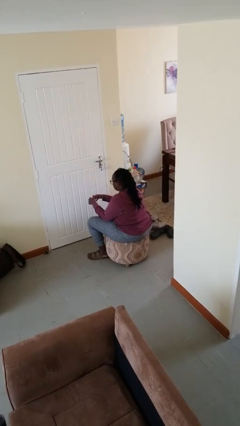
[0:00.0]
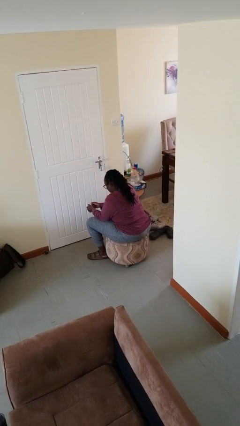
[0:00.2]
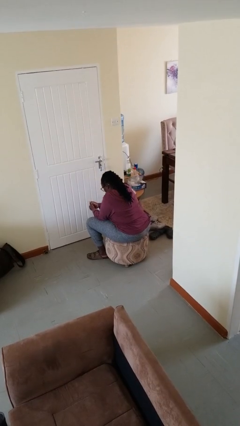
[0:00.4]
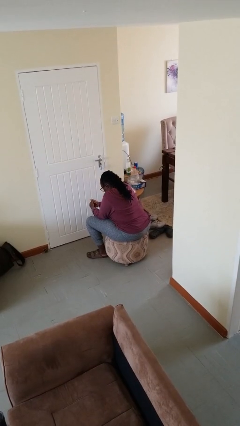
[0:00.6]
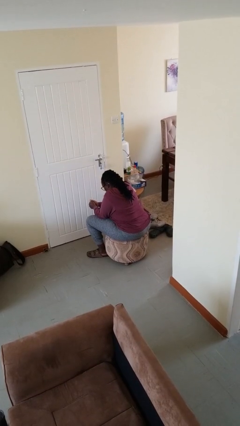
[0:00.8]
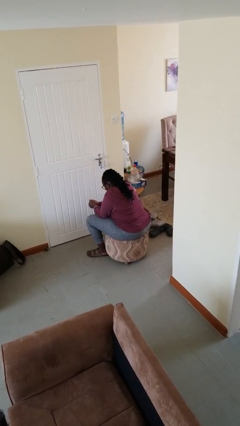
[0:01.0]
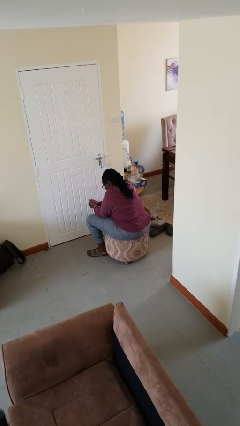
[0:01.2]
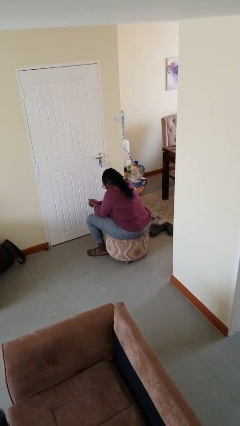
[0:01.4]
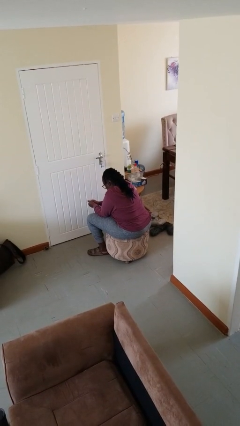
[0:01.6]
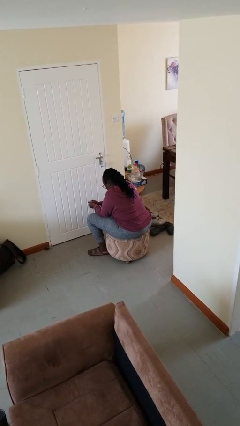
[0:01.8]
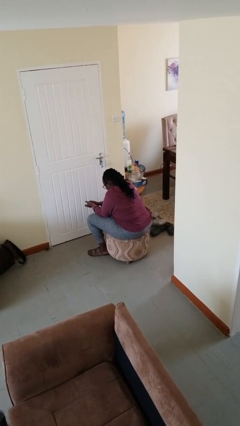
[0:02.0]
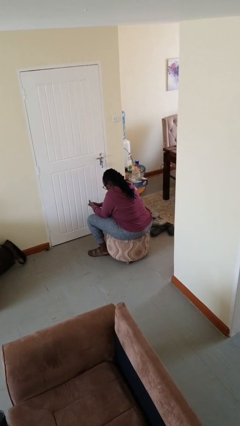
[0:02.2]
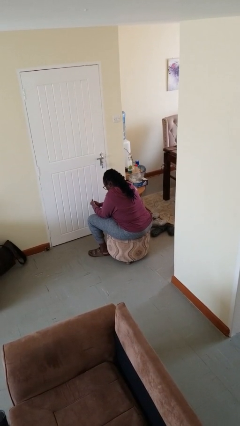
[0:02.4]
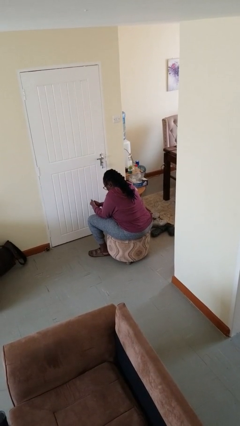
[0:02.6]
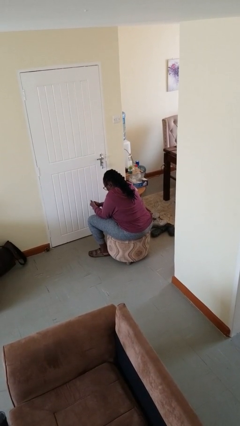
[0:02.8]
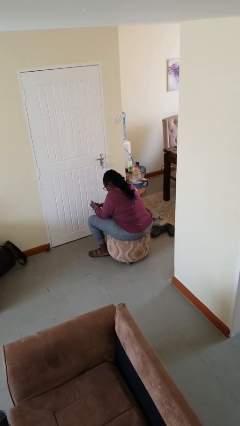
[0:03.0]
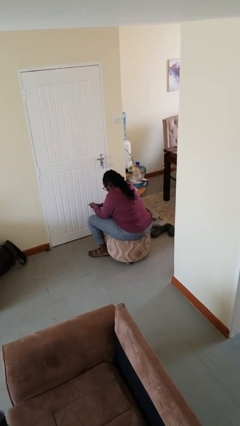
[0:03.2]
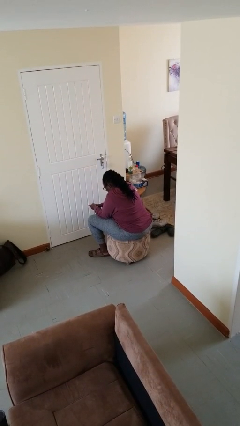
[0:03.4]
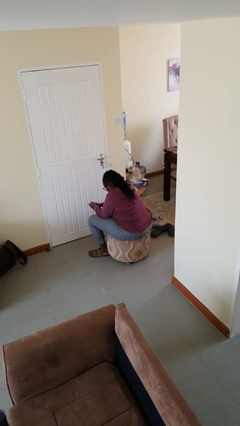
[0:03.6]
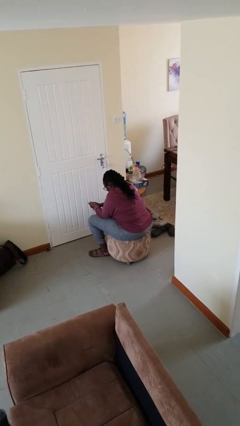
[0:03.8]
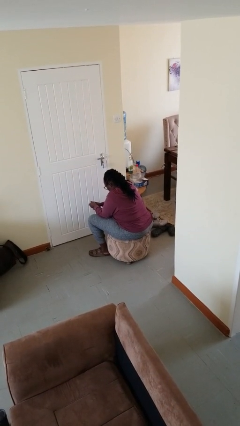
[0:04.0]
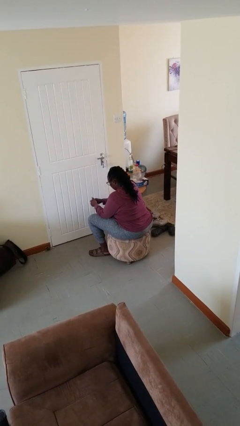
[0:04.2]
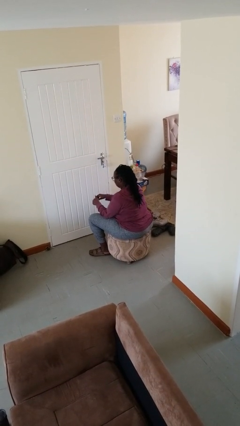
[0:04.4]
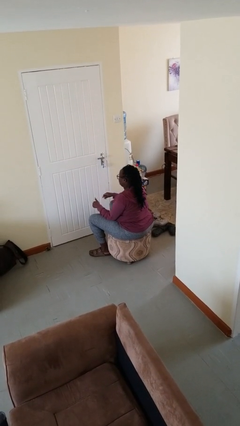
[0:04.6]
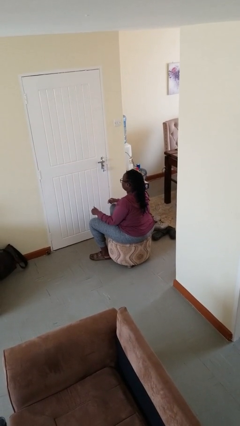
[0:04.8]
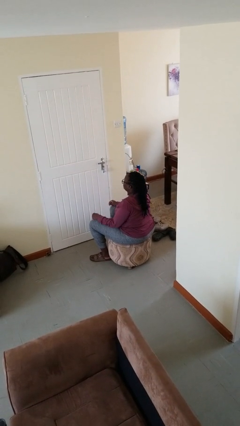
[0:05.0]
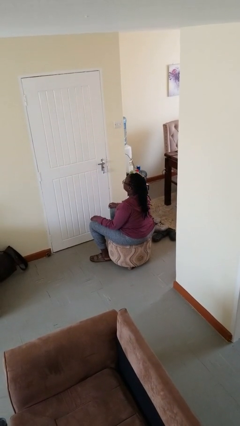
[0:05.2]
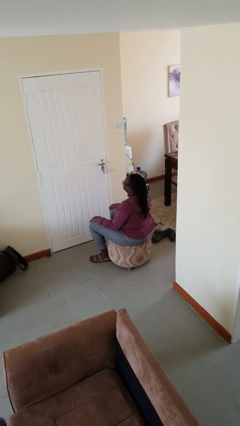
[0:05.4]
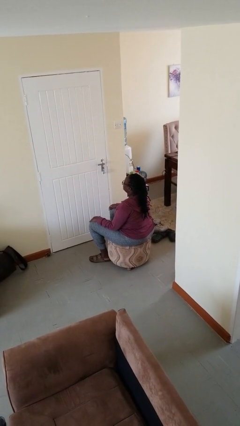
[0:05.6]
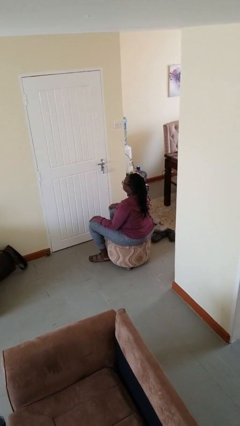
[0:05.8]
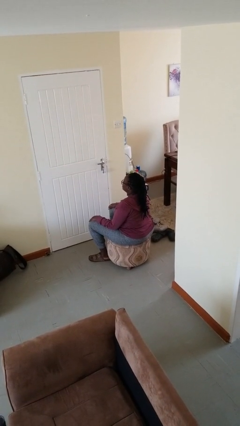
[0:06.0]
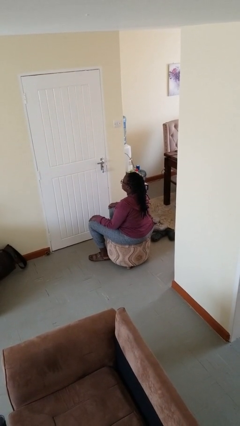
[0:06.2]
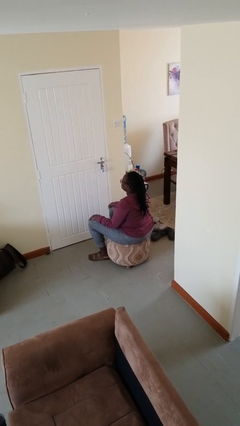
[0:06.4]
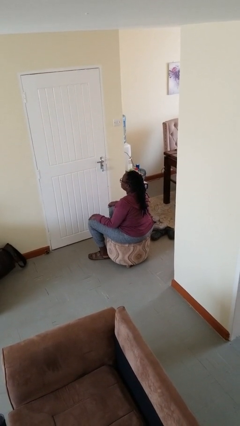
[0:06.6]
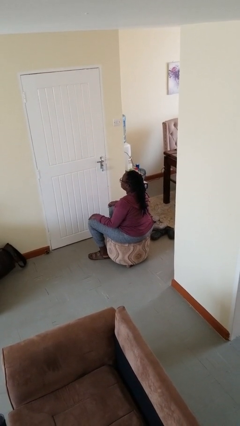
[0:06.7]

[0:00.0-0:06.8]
person looks at hands in lap

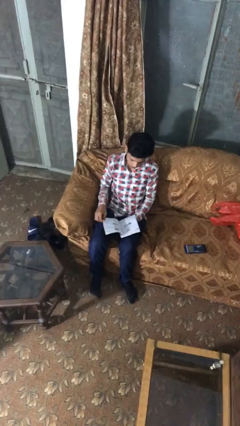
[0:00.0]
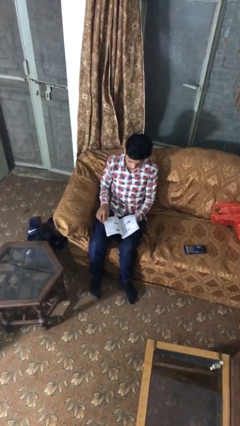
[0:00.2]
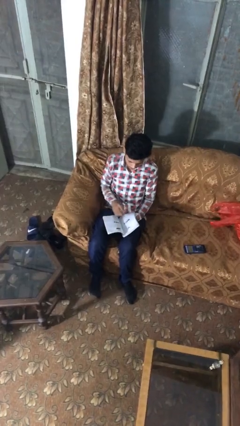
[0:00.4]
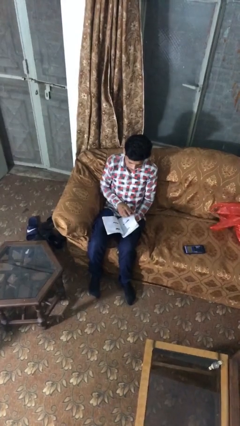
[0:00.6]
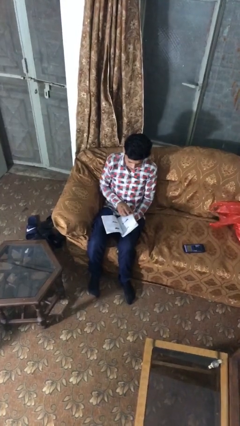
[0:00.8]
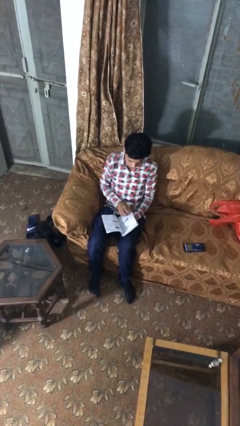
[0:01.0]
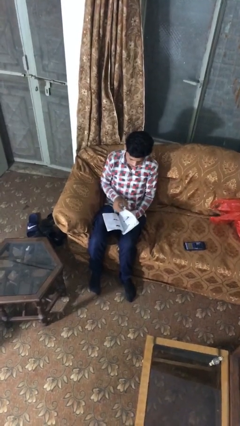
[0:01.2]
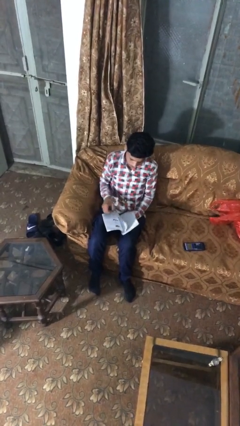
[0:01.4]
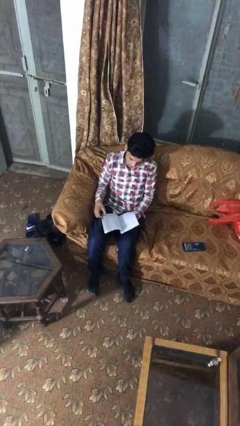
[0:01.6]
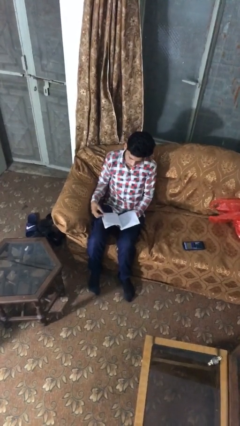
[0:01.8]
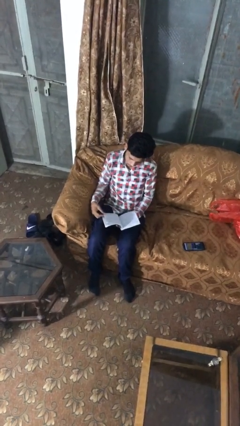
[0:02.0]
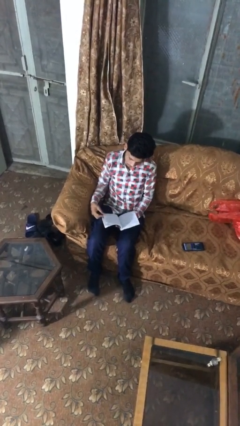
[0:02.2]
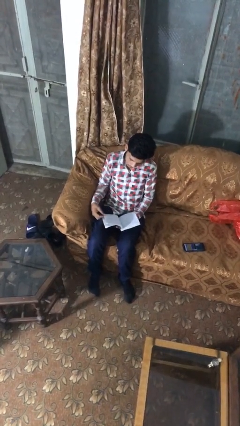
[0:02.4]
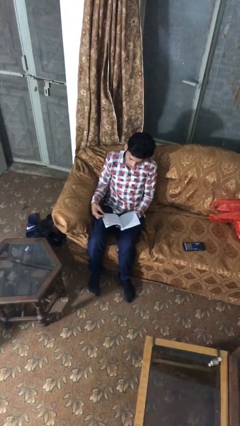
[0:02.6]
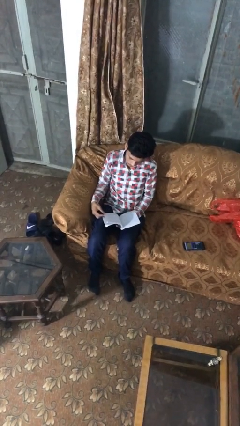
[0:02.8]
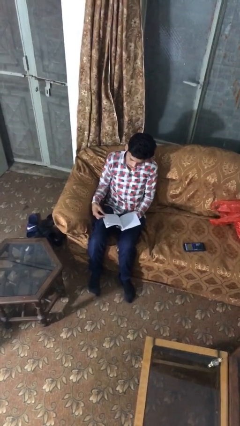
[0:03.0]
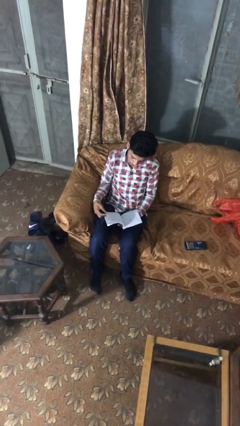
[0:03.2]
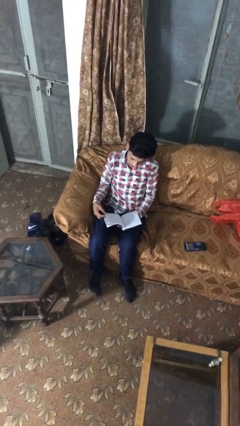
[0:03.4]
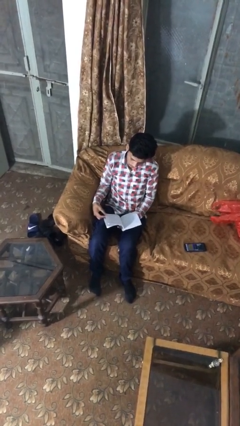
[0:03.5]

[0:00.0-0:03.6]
person reads document

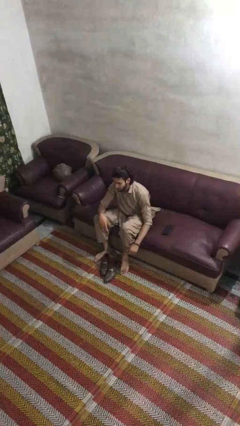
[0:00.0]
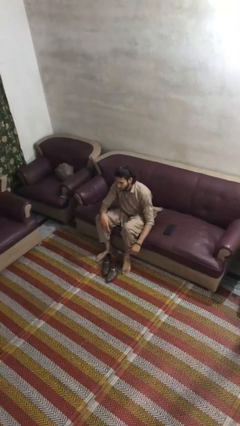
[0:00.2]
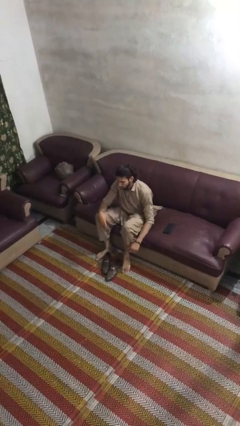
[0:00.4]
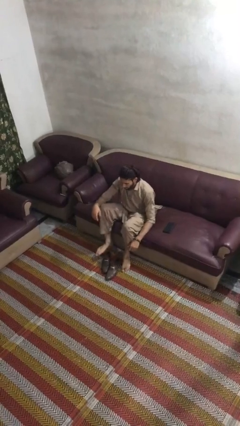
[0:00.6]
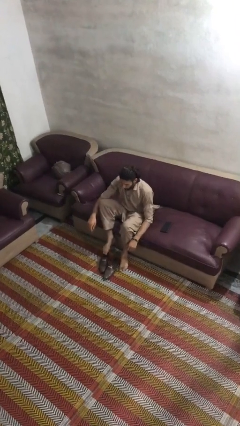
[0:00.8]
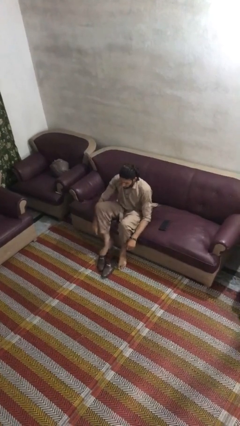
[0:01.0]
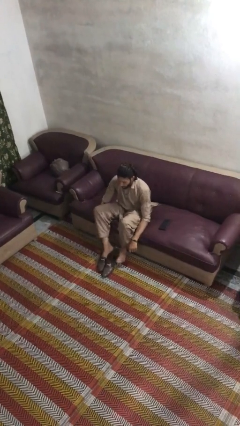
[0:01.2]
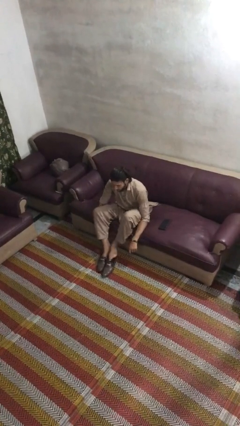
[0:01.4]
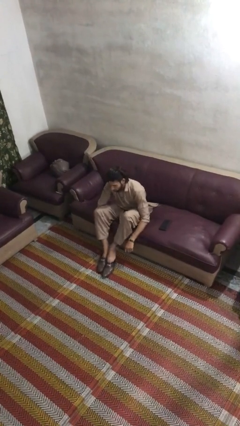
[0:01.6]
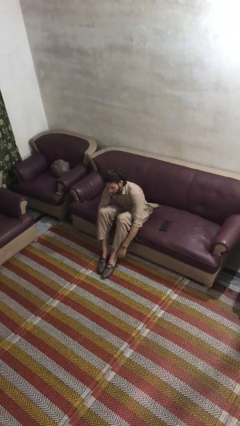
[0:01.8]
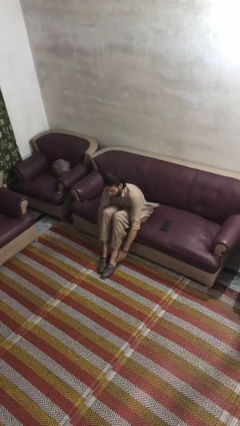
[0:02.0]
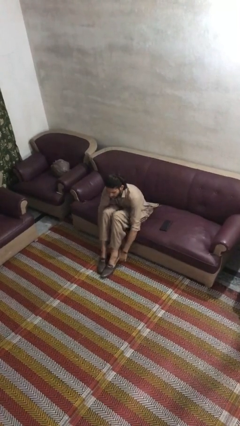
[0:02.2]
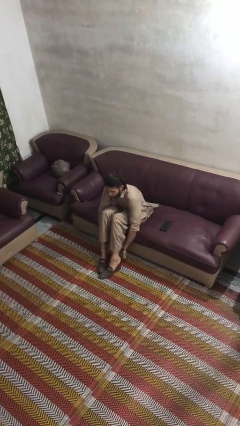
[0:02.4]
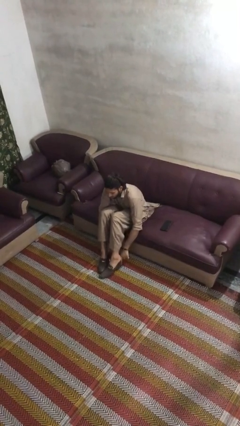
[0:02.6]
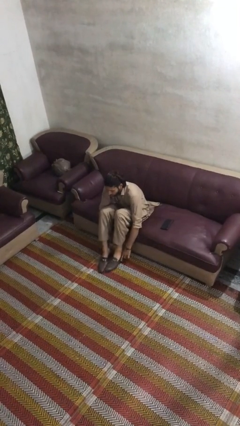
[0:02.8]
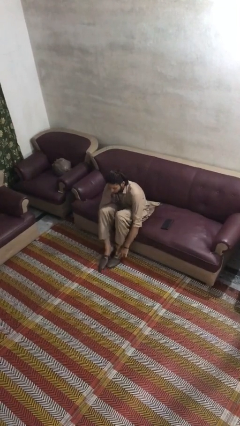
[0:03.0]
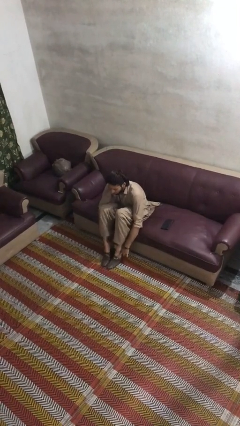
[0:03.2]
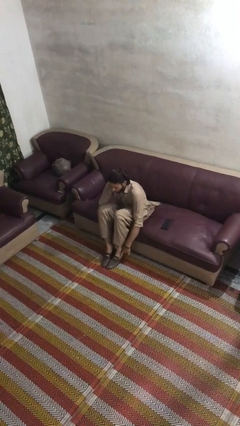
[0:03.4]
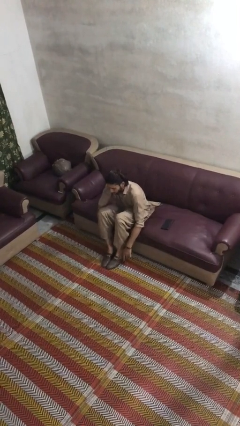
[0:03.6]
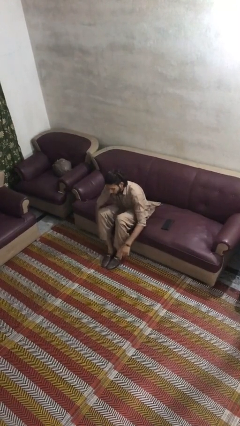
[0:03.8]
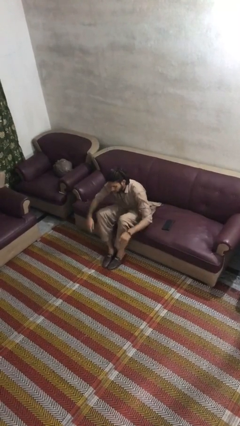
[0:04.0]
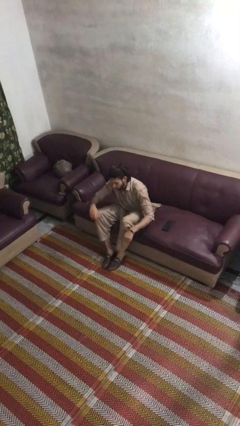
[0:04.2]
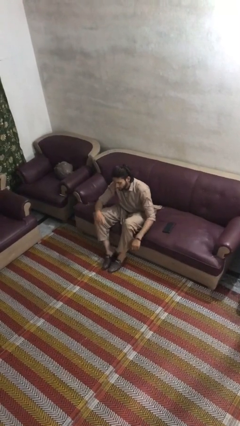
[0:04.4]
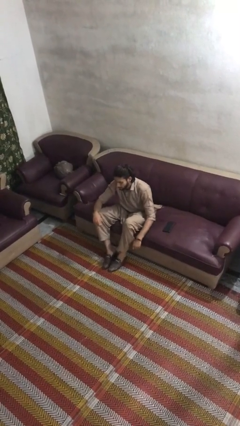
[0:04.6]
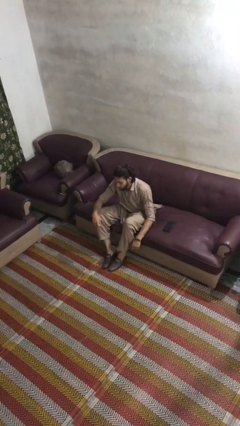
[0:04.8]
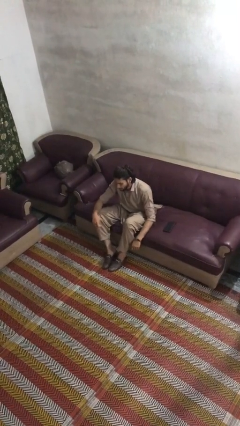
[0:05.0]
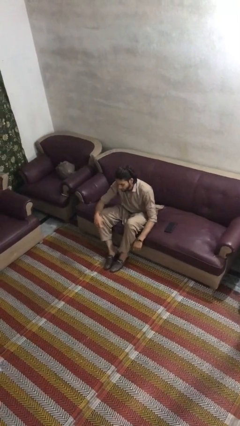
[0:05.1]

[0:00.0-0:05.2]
person puts on shoes

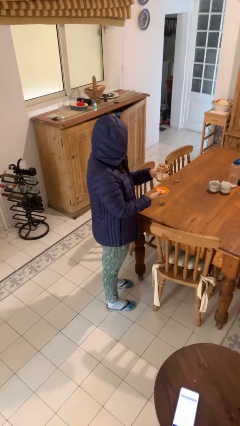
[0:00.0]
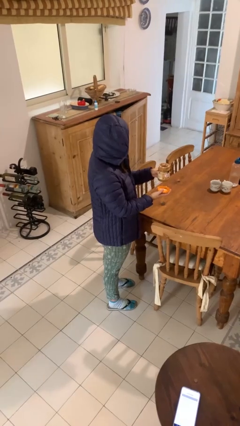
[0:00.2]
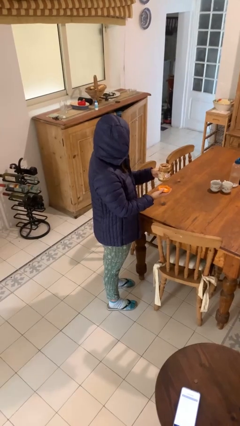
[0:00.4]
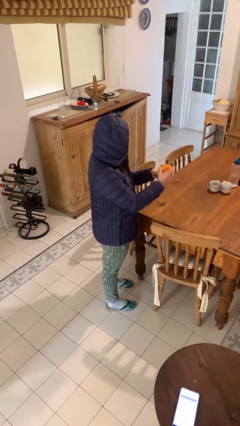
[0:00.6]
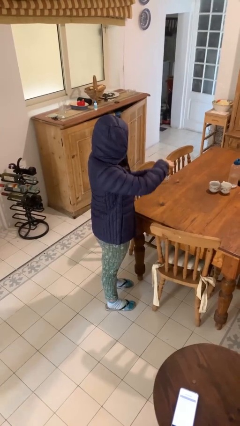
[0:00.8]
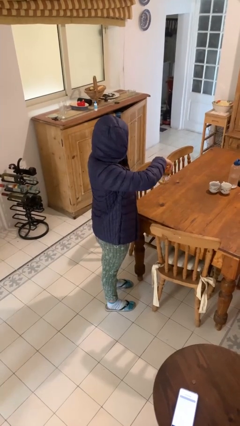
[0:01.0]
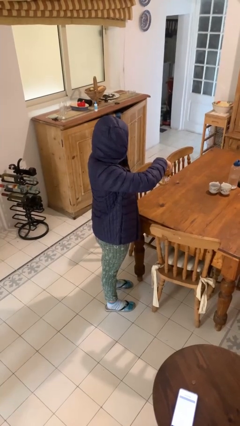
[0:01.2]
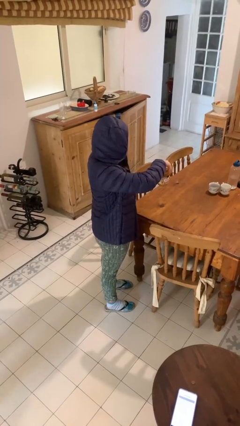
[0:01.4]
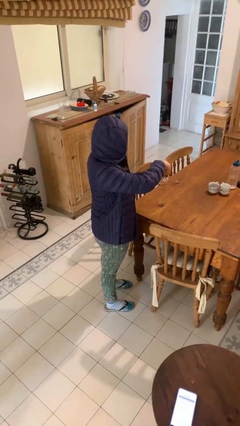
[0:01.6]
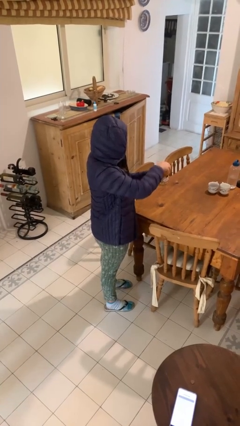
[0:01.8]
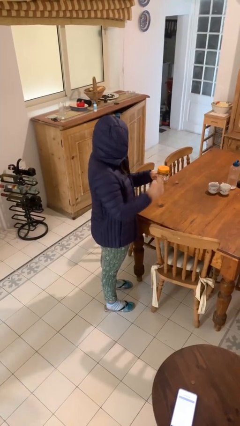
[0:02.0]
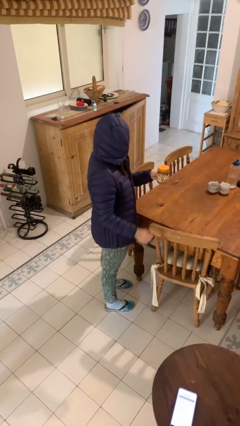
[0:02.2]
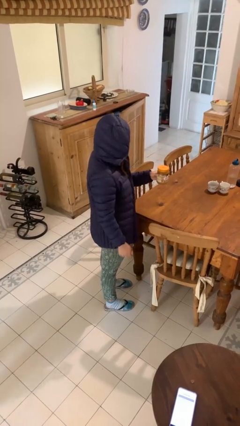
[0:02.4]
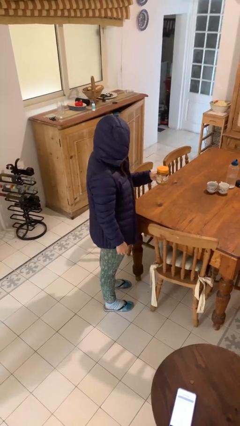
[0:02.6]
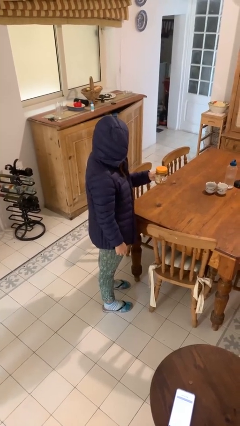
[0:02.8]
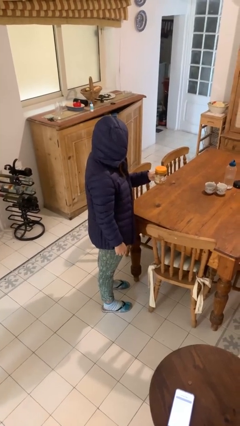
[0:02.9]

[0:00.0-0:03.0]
person closes jar
